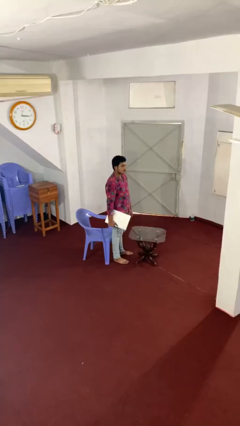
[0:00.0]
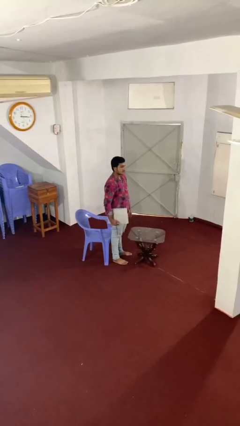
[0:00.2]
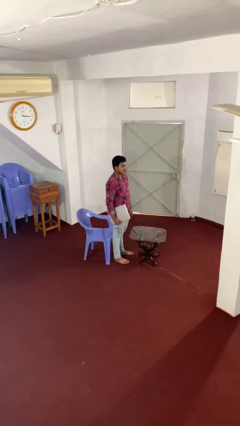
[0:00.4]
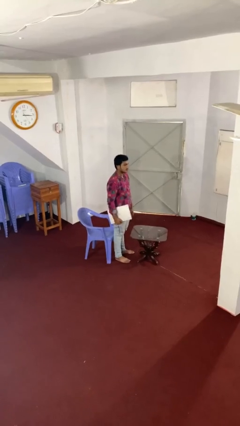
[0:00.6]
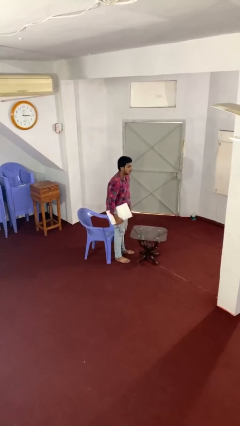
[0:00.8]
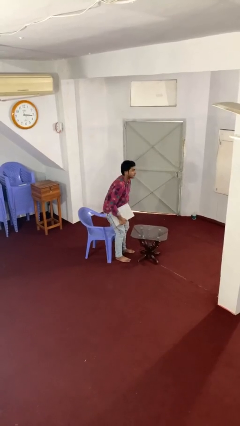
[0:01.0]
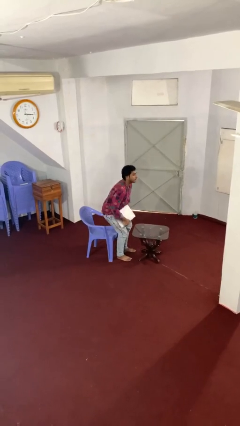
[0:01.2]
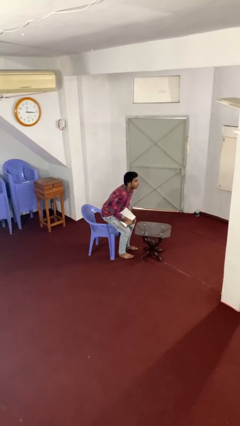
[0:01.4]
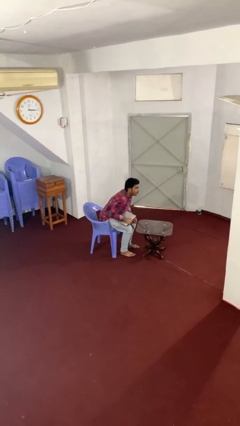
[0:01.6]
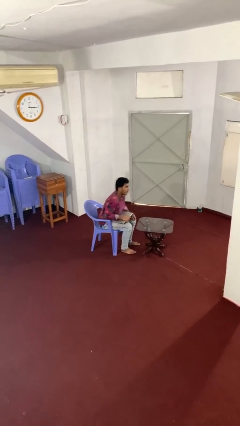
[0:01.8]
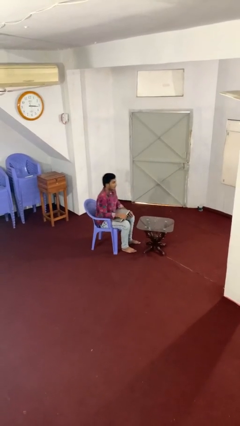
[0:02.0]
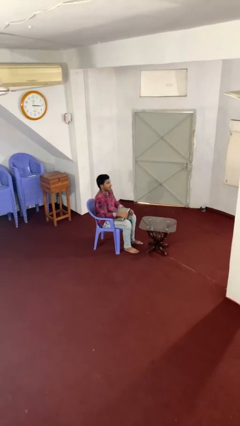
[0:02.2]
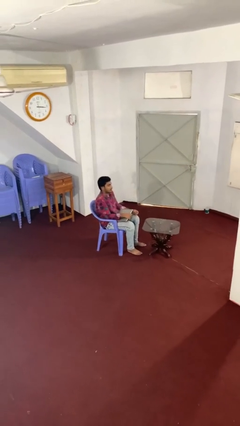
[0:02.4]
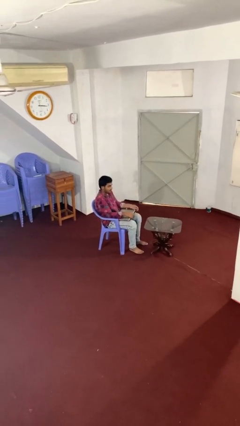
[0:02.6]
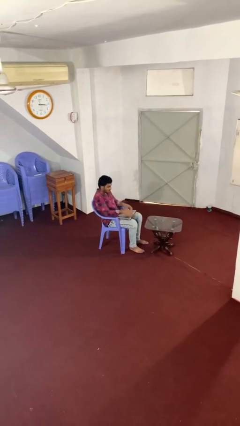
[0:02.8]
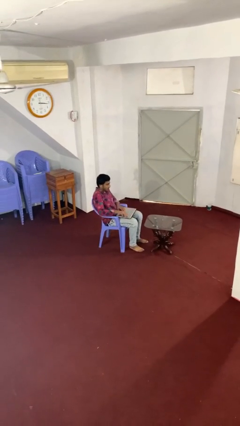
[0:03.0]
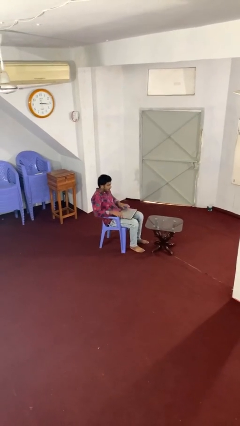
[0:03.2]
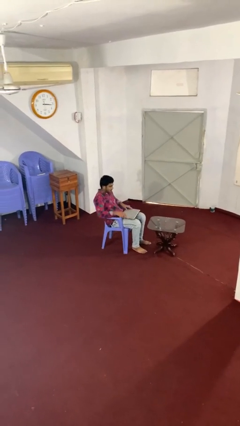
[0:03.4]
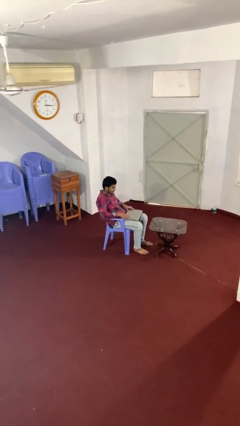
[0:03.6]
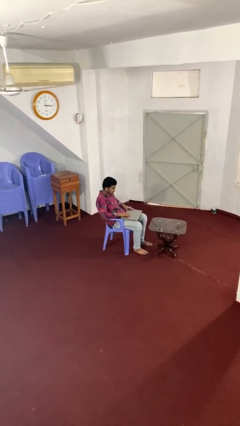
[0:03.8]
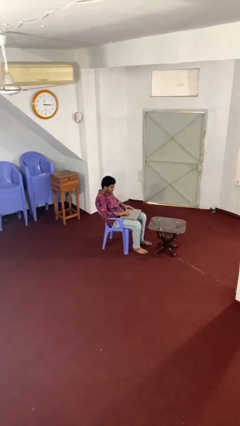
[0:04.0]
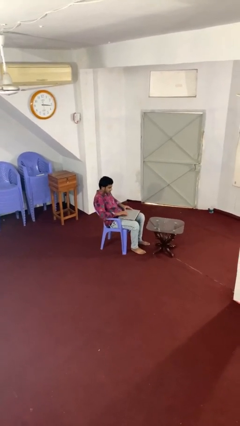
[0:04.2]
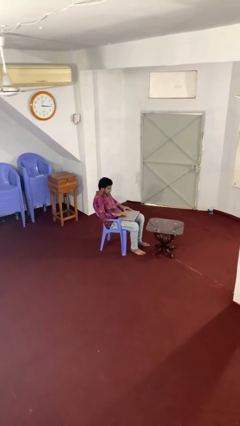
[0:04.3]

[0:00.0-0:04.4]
person sits down

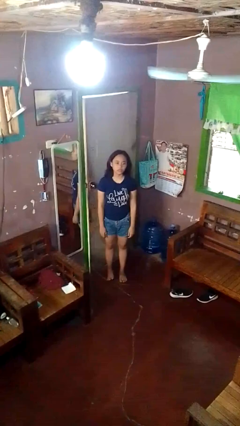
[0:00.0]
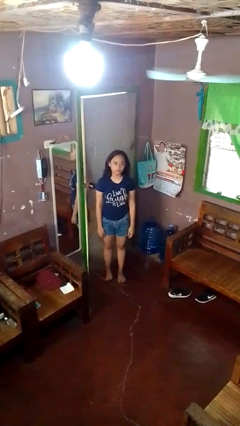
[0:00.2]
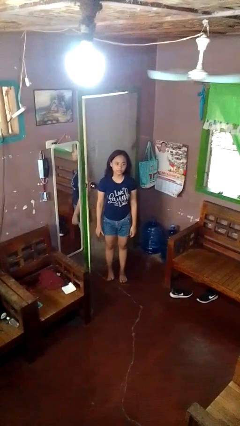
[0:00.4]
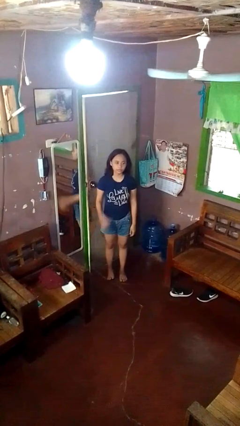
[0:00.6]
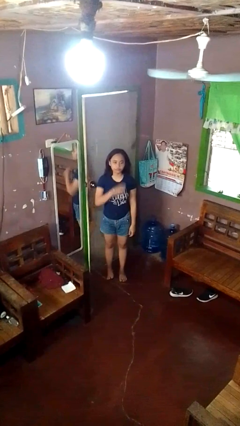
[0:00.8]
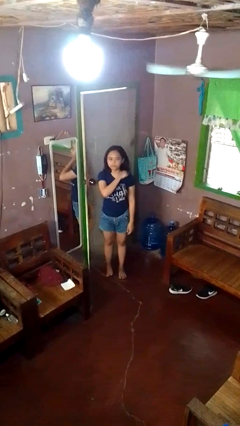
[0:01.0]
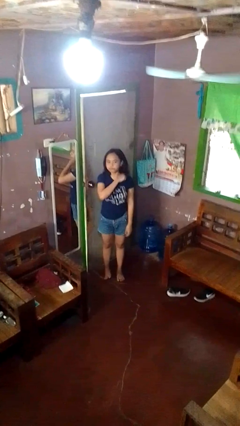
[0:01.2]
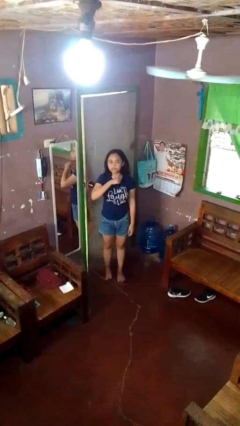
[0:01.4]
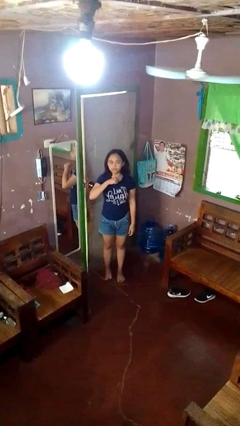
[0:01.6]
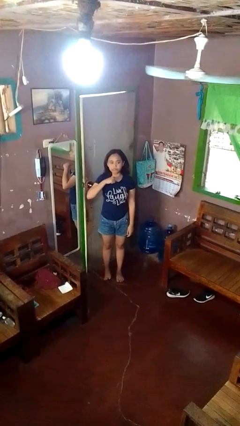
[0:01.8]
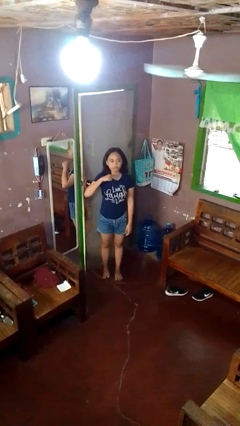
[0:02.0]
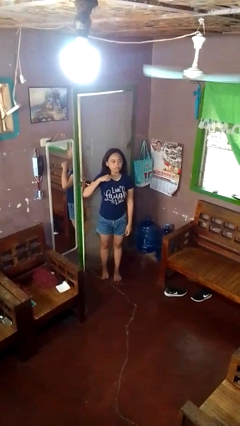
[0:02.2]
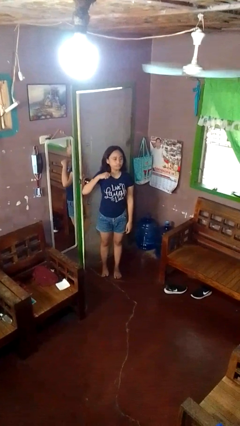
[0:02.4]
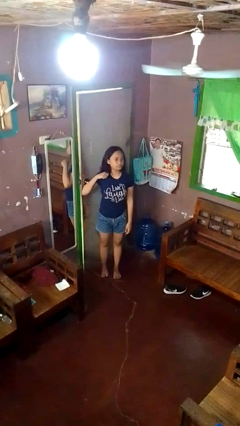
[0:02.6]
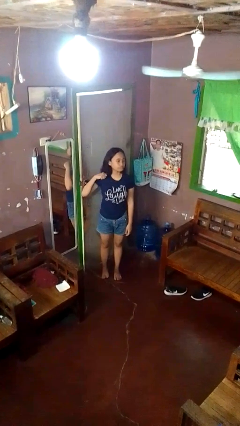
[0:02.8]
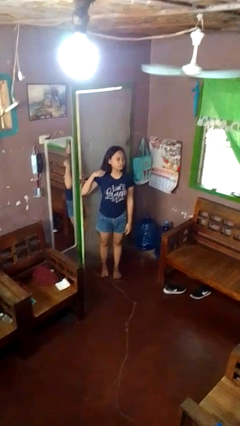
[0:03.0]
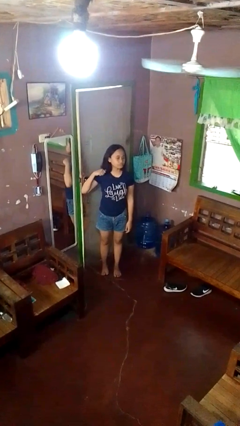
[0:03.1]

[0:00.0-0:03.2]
person gestures cut

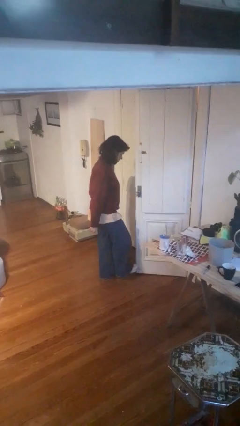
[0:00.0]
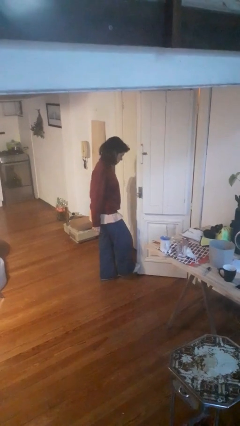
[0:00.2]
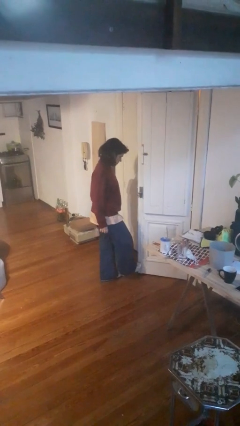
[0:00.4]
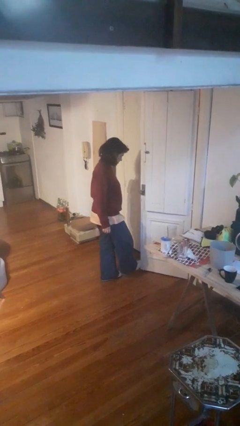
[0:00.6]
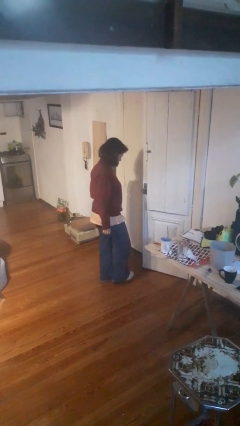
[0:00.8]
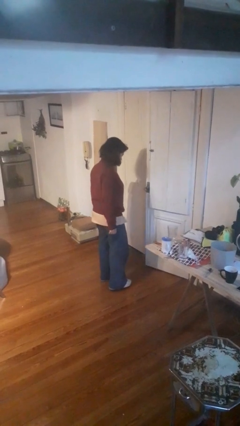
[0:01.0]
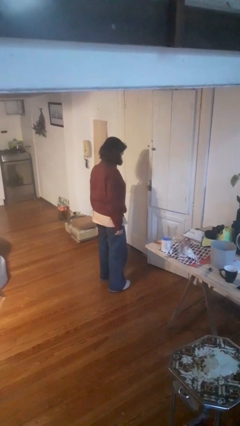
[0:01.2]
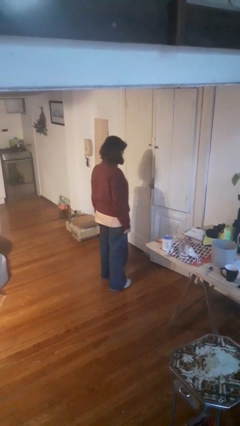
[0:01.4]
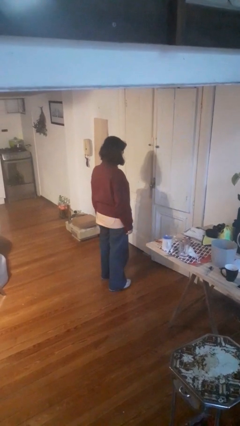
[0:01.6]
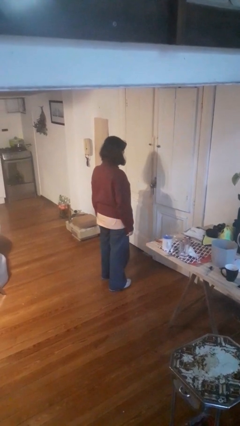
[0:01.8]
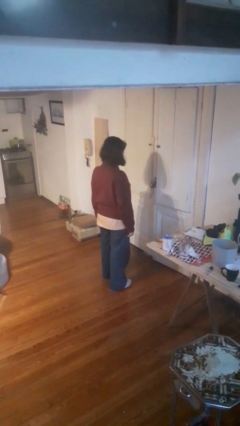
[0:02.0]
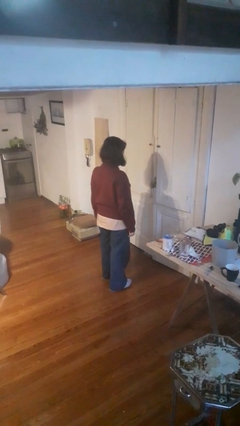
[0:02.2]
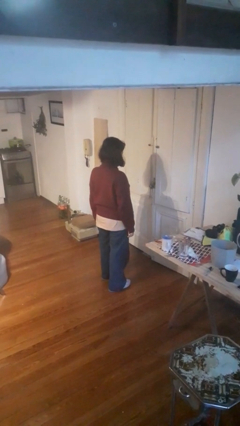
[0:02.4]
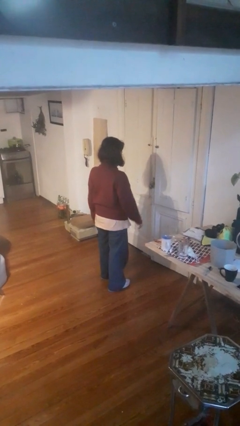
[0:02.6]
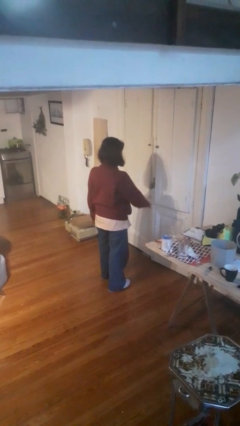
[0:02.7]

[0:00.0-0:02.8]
person closes door with foot

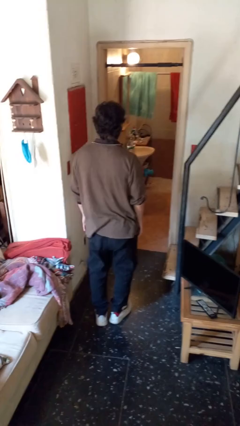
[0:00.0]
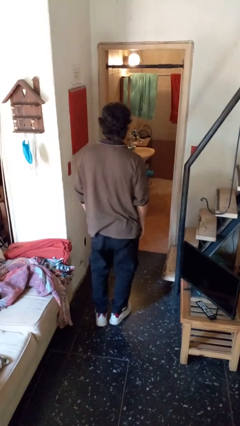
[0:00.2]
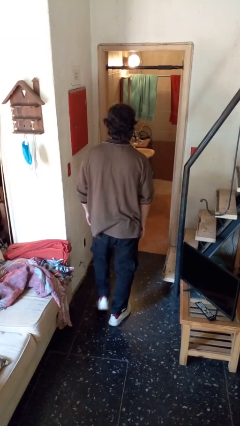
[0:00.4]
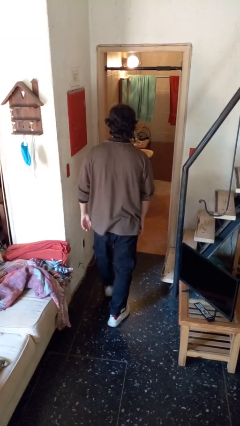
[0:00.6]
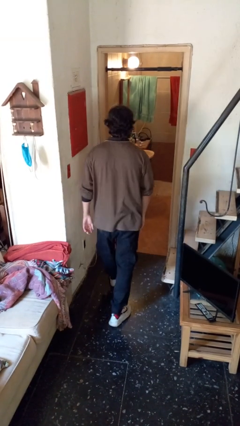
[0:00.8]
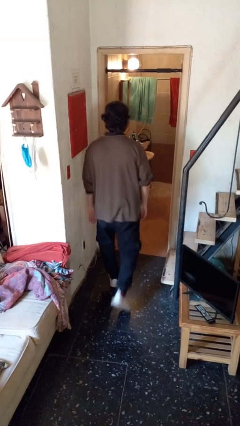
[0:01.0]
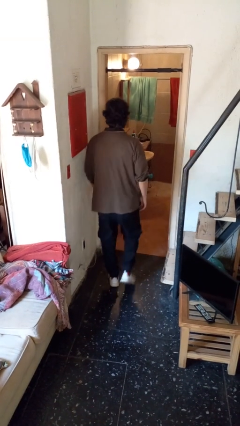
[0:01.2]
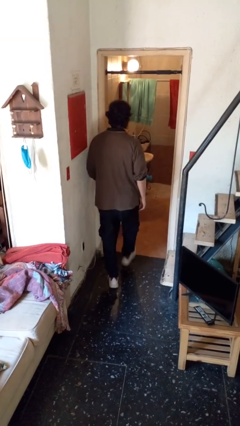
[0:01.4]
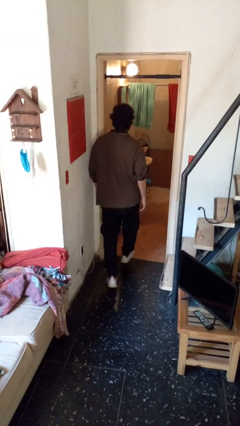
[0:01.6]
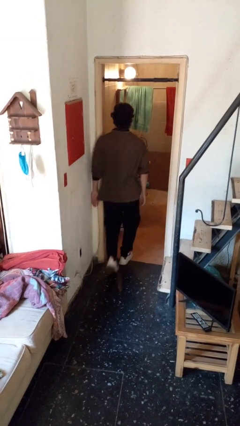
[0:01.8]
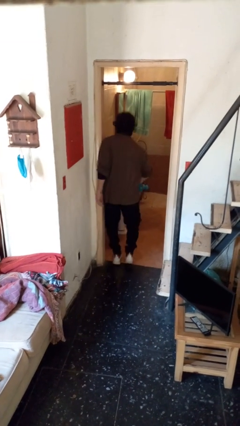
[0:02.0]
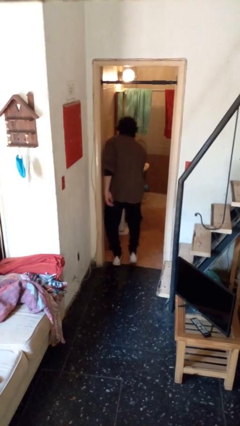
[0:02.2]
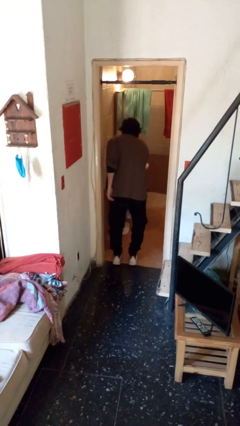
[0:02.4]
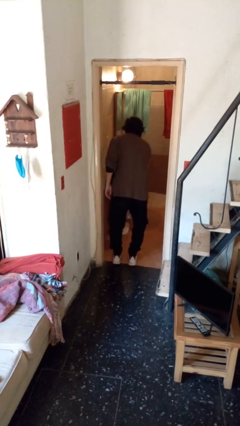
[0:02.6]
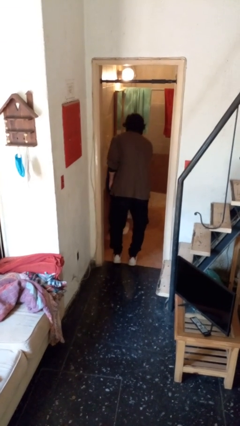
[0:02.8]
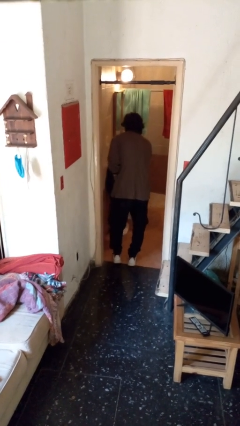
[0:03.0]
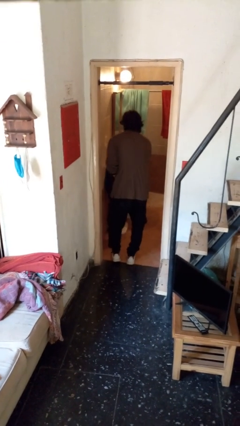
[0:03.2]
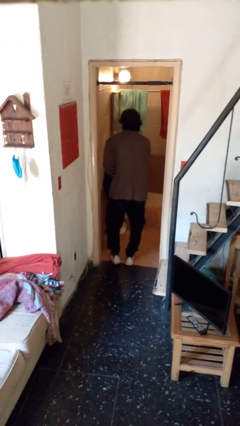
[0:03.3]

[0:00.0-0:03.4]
person bumps into wall

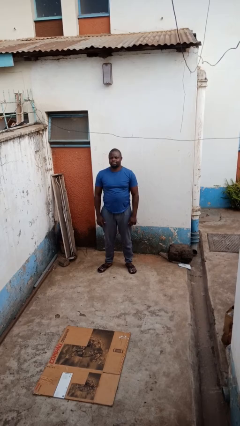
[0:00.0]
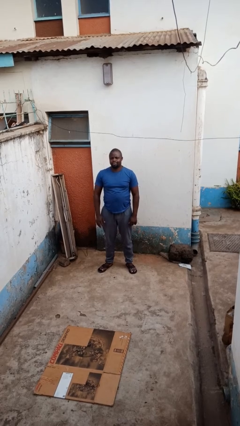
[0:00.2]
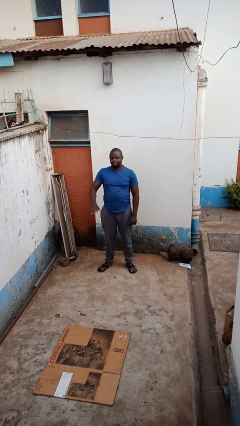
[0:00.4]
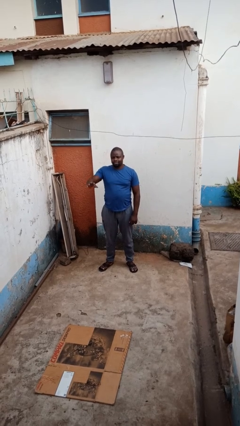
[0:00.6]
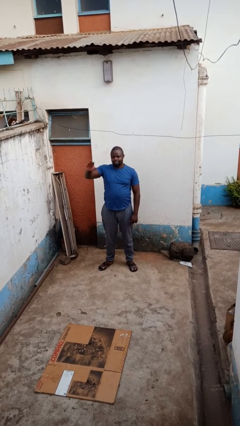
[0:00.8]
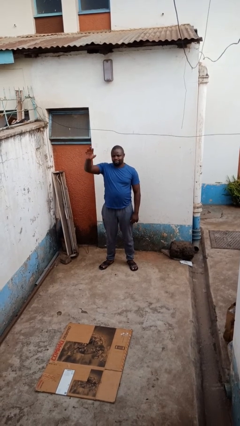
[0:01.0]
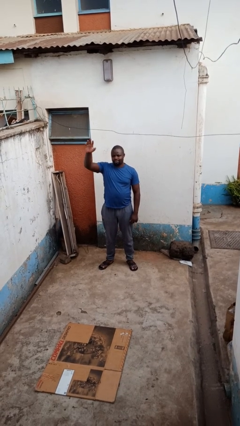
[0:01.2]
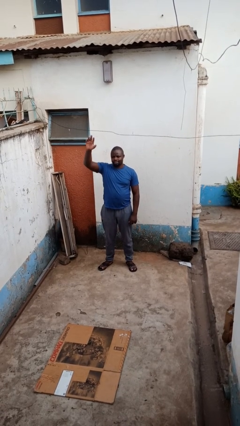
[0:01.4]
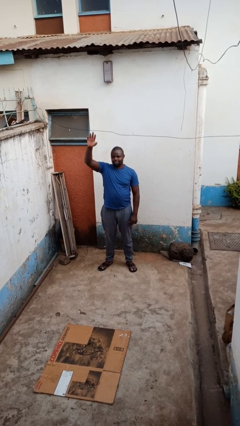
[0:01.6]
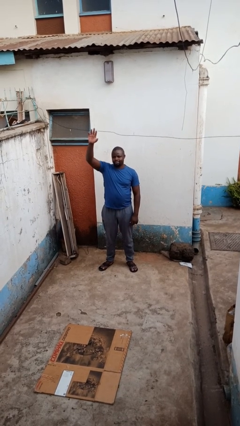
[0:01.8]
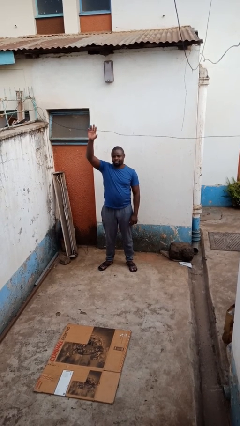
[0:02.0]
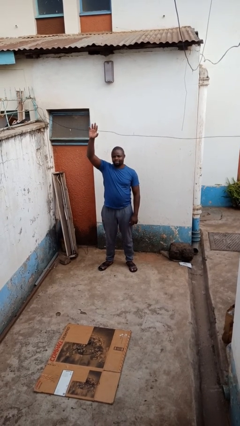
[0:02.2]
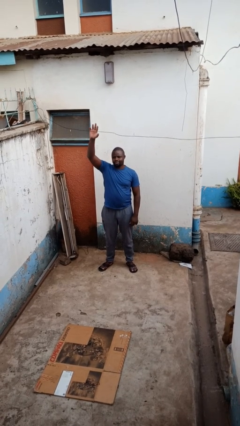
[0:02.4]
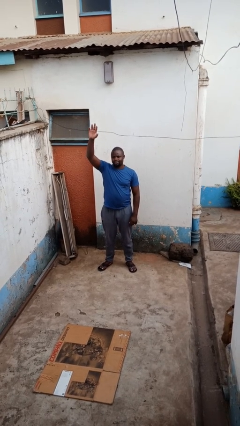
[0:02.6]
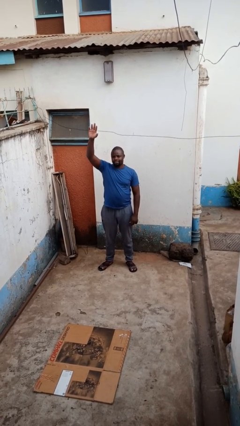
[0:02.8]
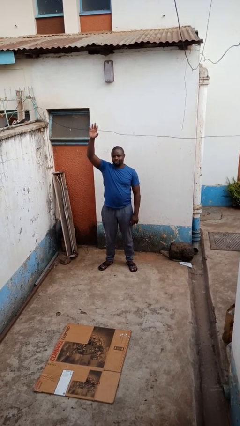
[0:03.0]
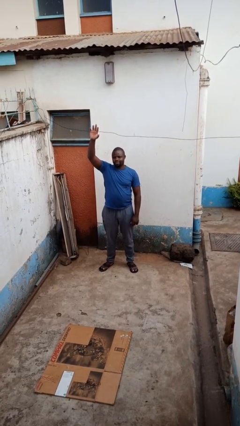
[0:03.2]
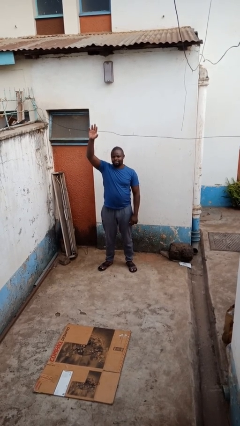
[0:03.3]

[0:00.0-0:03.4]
person gestures raise hand

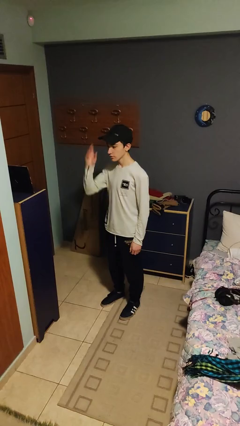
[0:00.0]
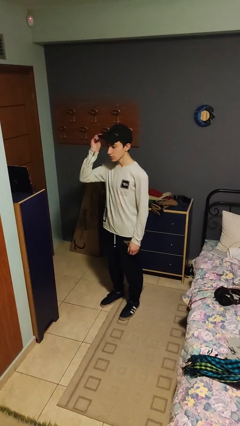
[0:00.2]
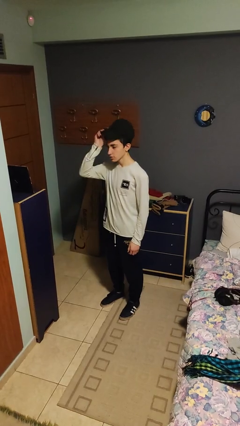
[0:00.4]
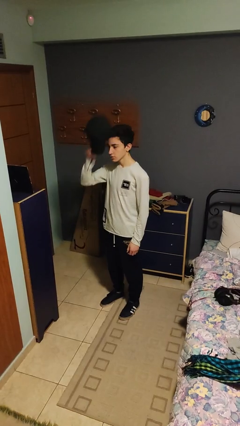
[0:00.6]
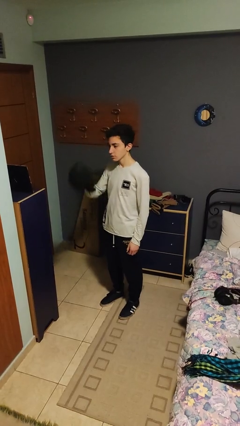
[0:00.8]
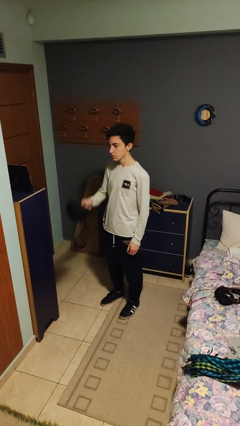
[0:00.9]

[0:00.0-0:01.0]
person takes off hat
